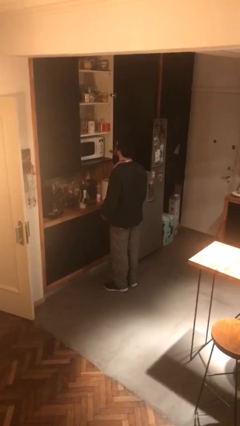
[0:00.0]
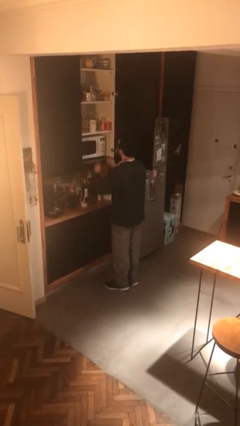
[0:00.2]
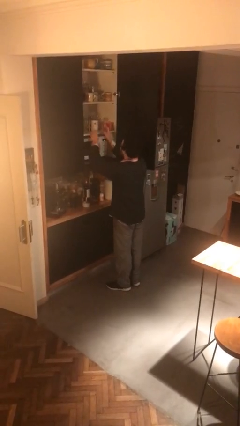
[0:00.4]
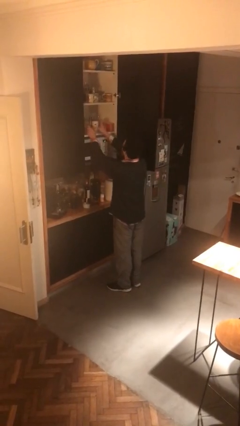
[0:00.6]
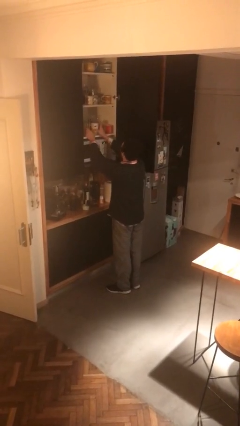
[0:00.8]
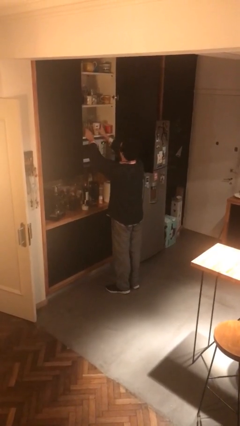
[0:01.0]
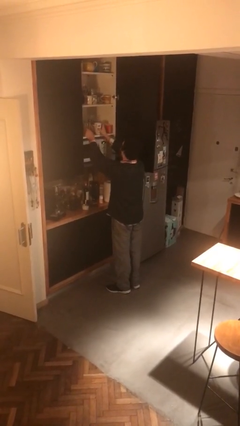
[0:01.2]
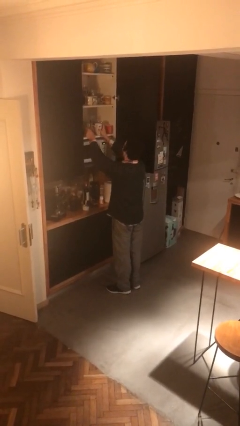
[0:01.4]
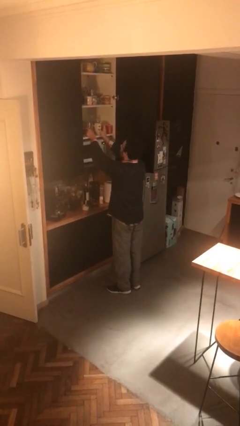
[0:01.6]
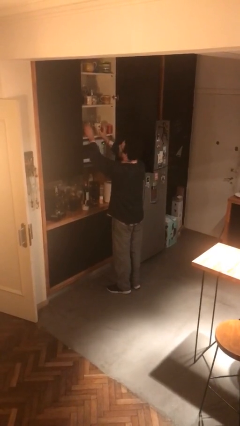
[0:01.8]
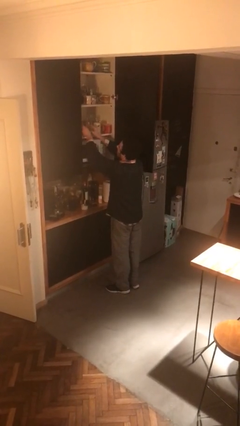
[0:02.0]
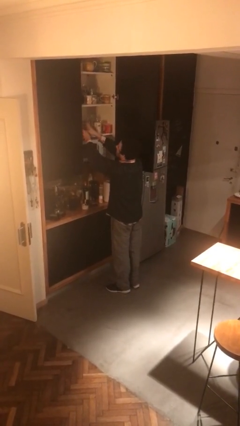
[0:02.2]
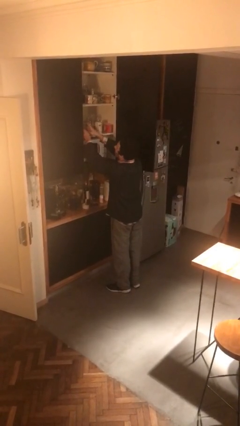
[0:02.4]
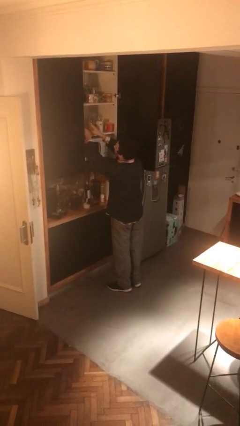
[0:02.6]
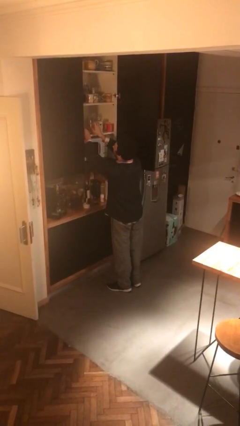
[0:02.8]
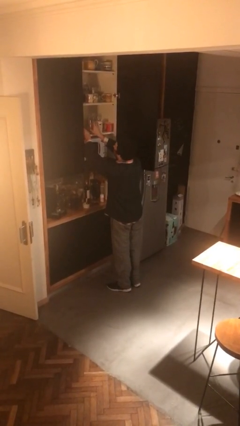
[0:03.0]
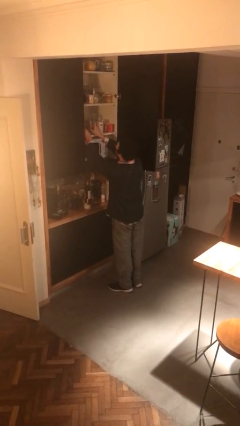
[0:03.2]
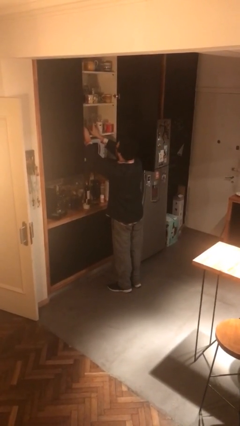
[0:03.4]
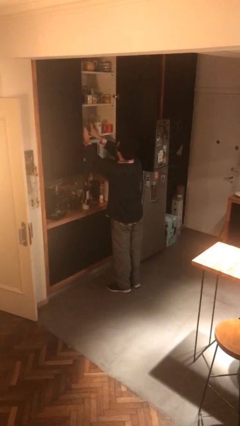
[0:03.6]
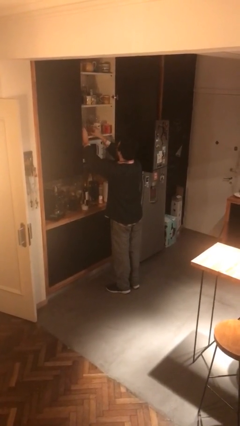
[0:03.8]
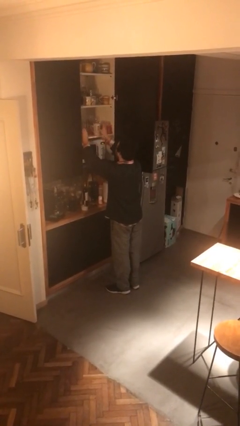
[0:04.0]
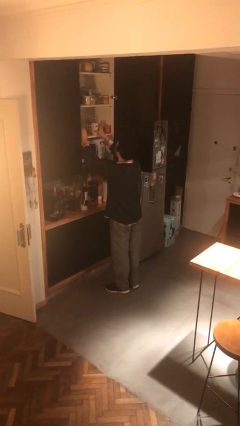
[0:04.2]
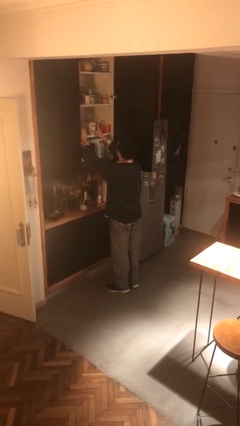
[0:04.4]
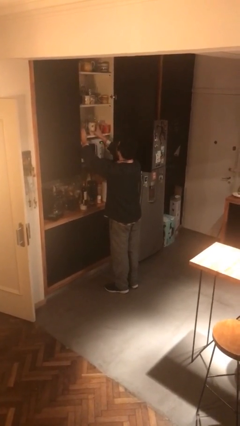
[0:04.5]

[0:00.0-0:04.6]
person searches in cabinet

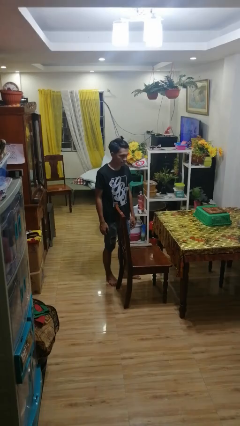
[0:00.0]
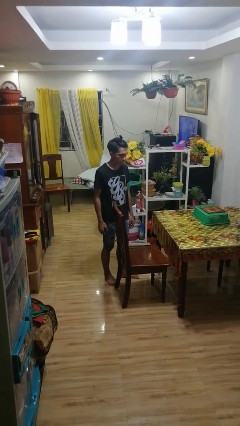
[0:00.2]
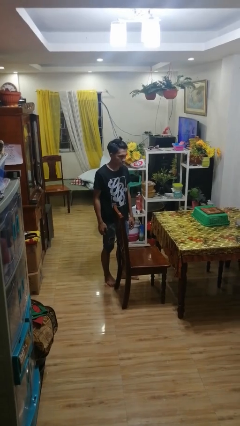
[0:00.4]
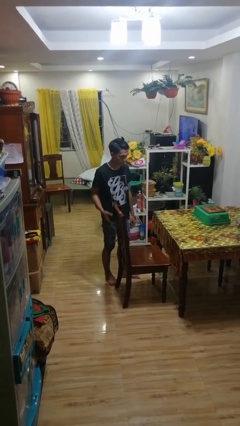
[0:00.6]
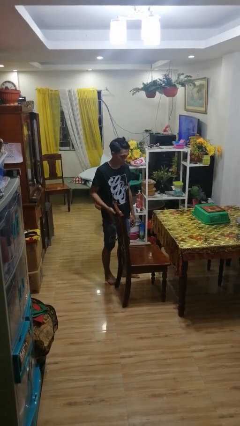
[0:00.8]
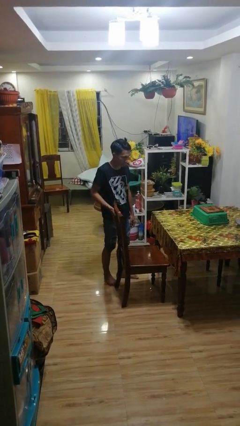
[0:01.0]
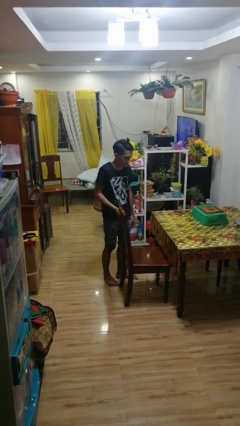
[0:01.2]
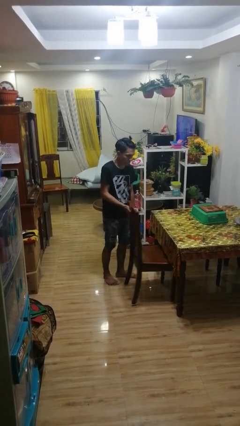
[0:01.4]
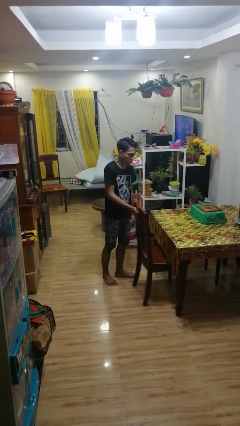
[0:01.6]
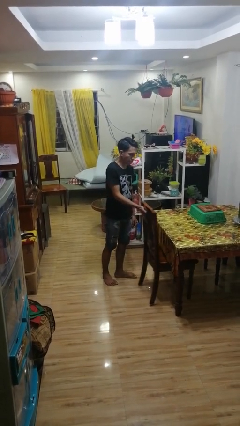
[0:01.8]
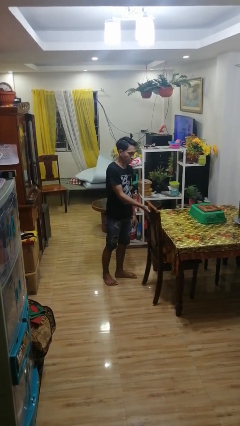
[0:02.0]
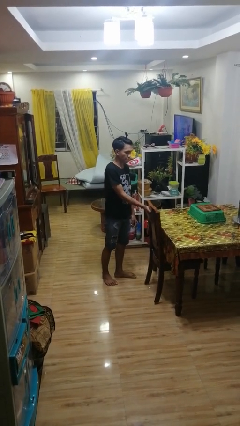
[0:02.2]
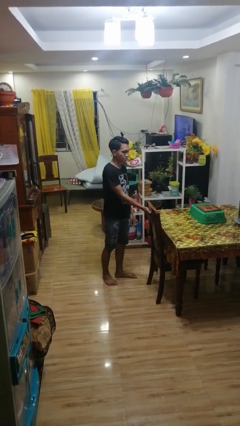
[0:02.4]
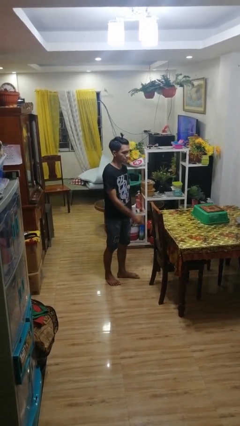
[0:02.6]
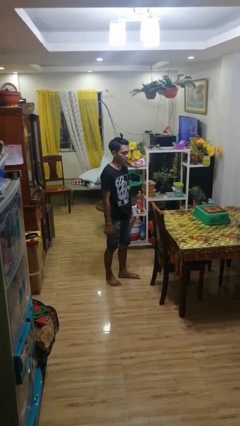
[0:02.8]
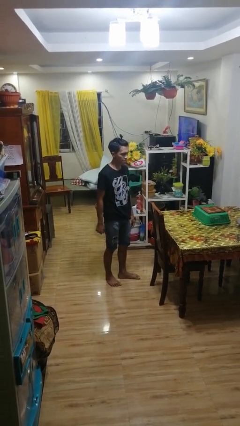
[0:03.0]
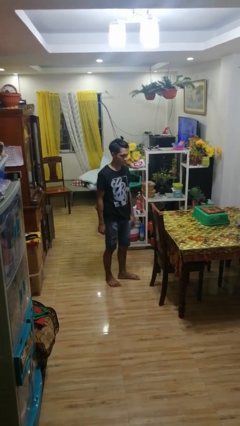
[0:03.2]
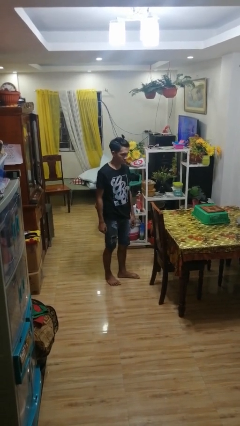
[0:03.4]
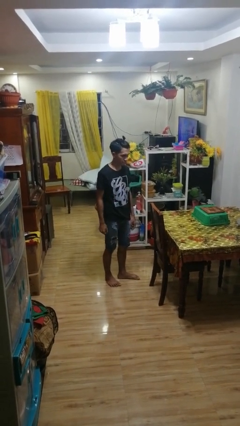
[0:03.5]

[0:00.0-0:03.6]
person pushes in chair

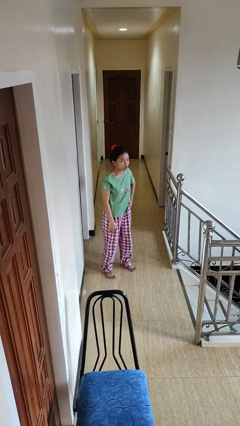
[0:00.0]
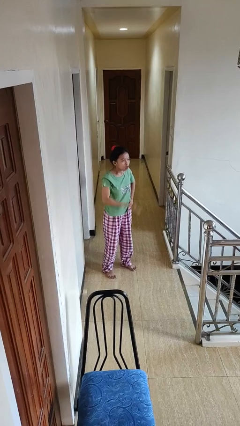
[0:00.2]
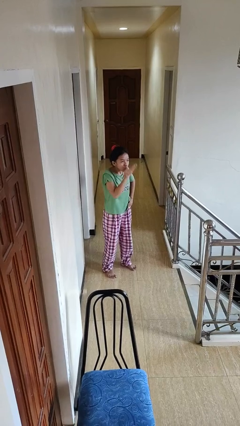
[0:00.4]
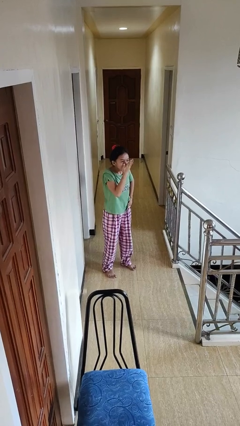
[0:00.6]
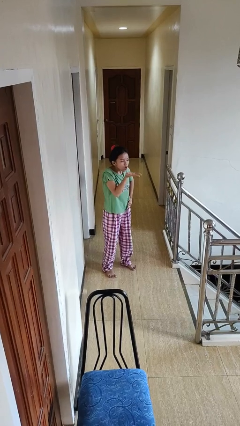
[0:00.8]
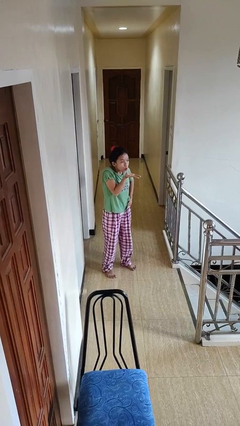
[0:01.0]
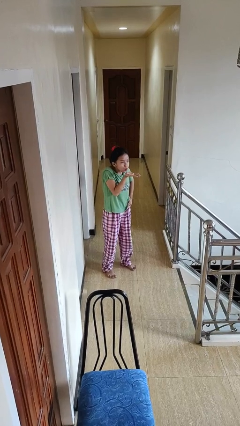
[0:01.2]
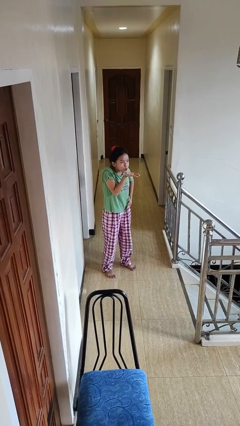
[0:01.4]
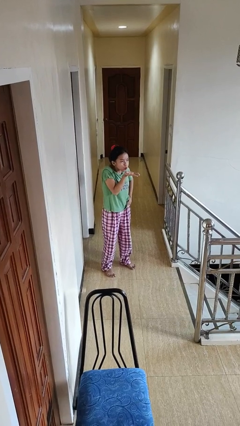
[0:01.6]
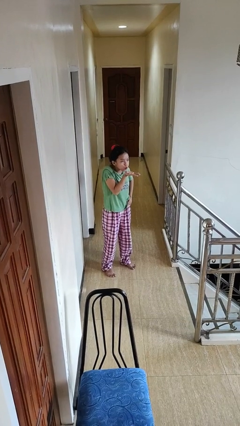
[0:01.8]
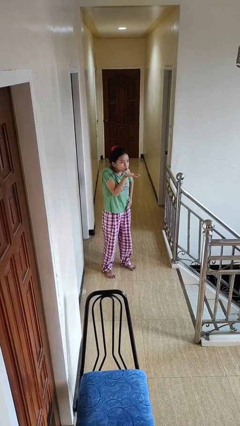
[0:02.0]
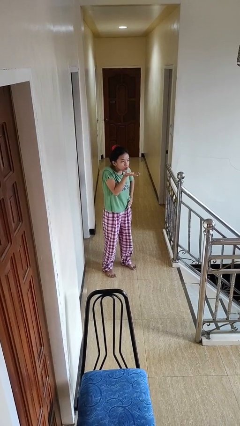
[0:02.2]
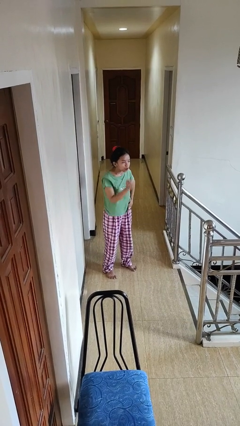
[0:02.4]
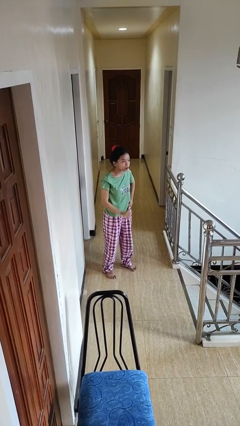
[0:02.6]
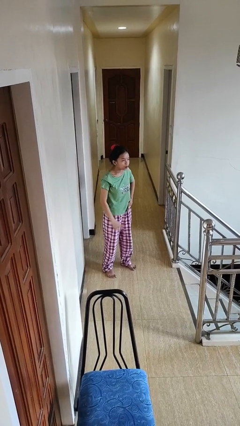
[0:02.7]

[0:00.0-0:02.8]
person gestures blow kiss

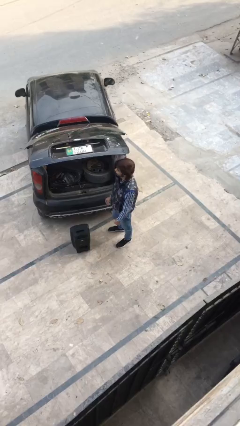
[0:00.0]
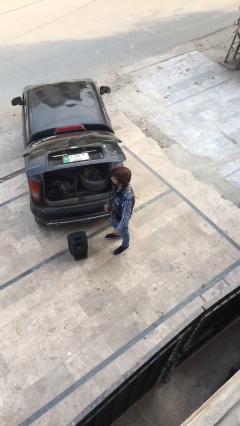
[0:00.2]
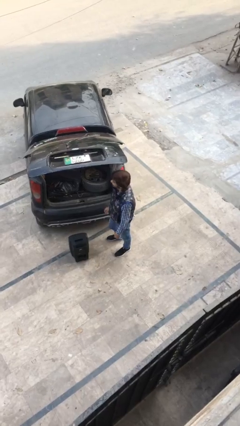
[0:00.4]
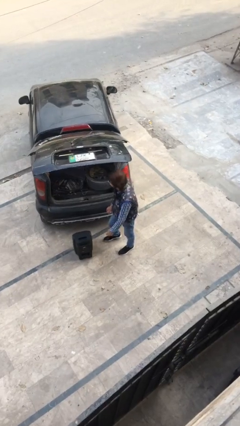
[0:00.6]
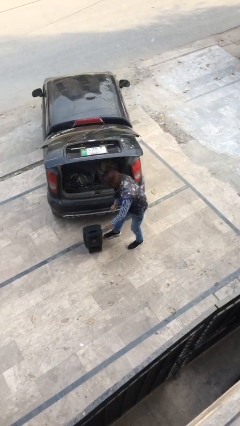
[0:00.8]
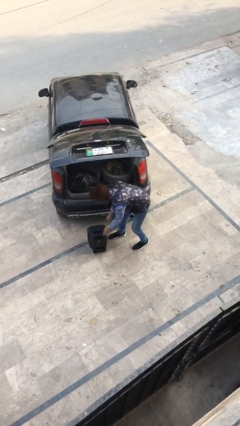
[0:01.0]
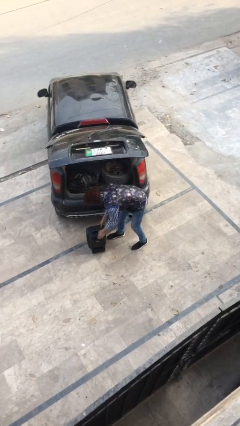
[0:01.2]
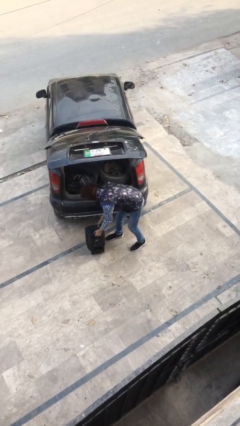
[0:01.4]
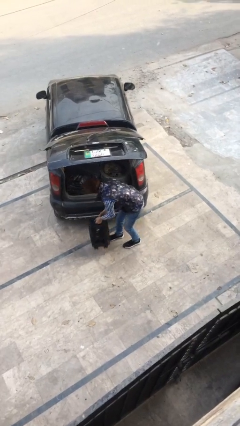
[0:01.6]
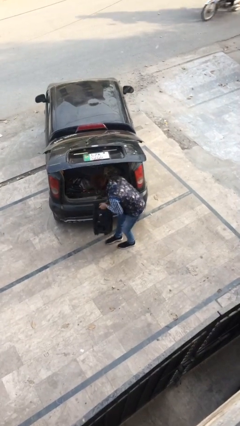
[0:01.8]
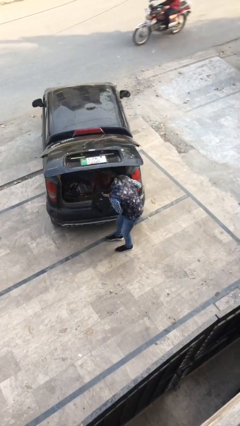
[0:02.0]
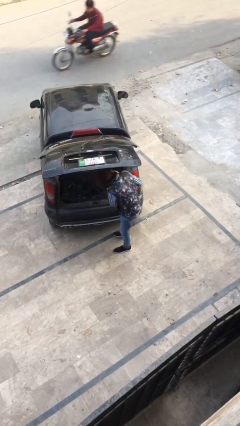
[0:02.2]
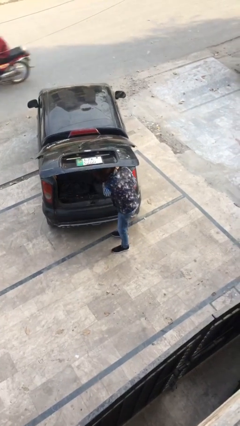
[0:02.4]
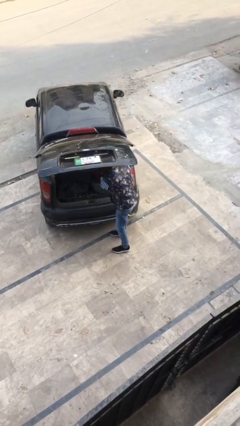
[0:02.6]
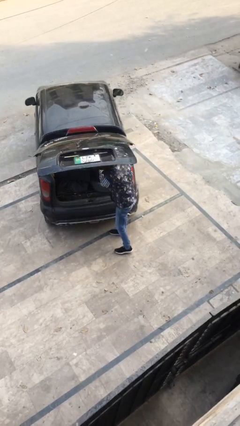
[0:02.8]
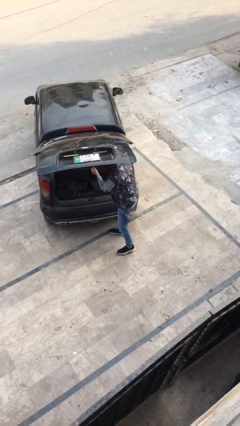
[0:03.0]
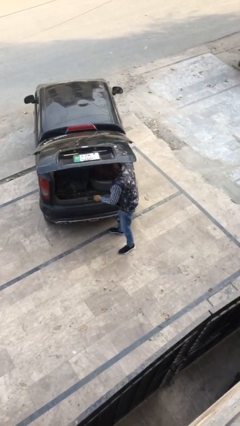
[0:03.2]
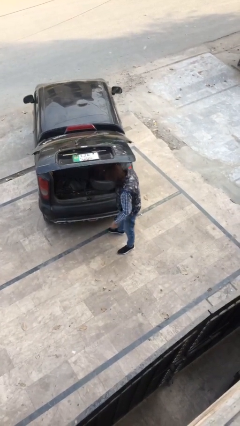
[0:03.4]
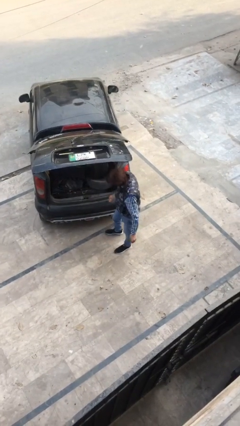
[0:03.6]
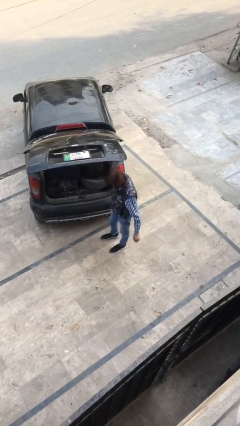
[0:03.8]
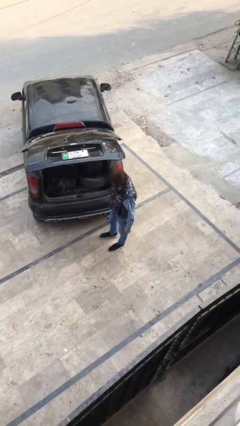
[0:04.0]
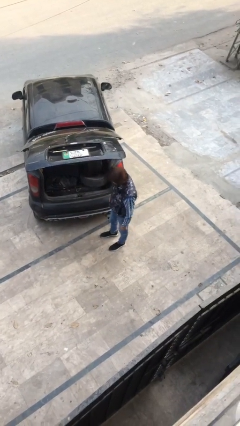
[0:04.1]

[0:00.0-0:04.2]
person loads car

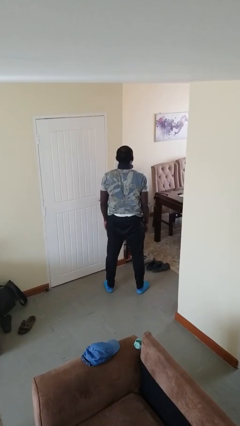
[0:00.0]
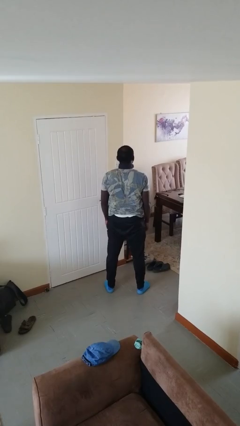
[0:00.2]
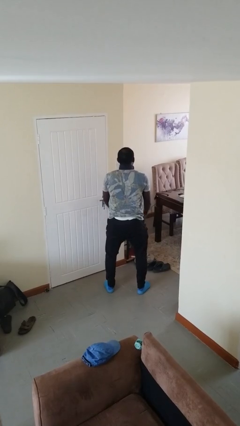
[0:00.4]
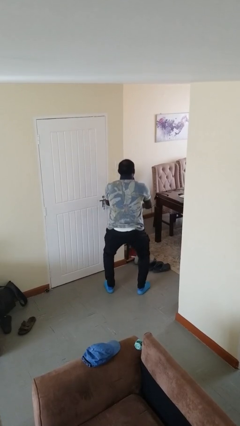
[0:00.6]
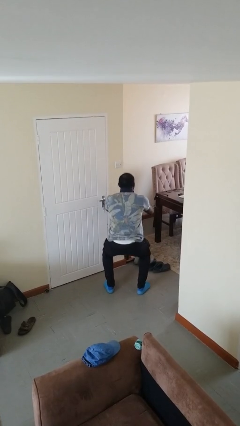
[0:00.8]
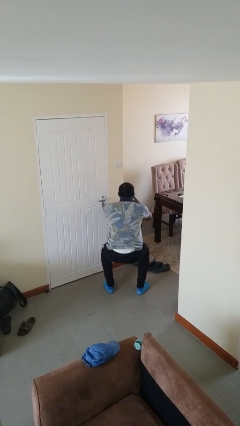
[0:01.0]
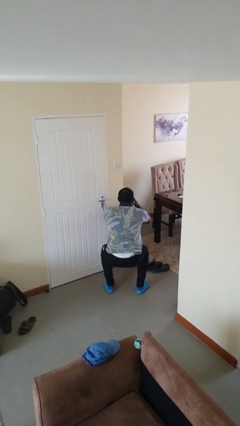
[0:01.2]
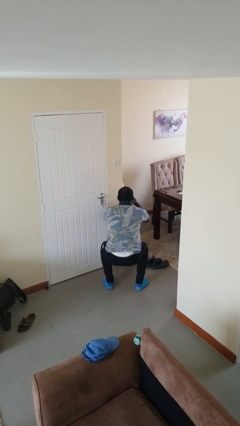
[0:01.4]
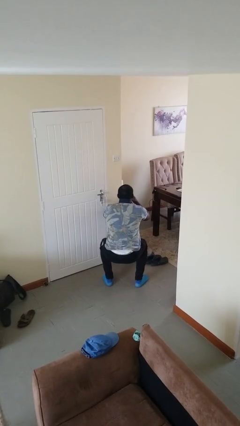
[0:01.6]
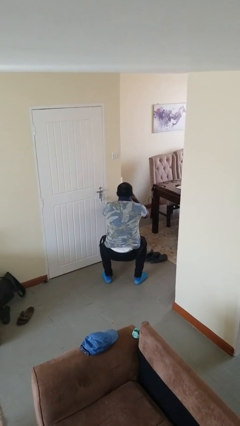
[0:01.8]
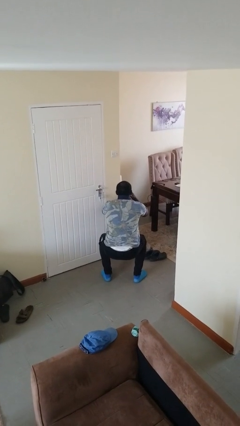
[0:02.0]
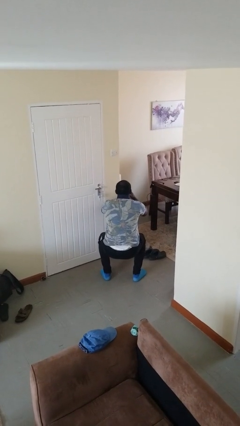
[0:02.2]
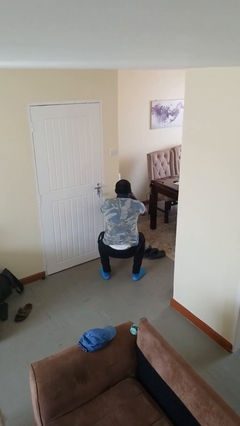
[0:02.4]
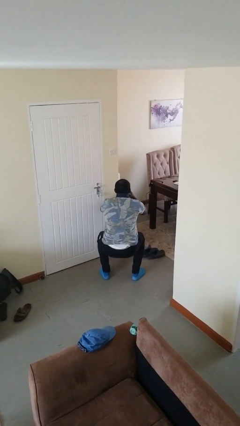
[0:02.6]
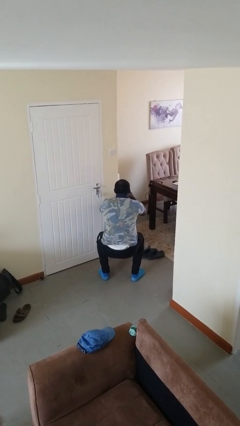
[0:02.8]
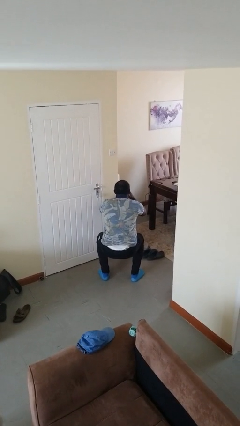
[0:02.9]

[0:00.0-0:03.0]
person squats
